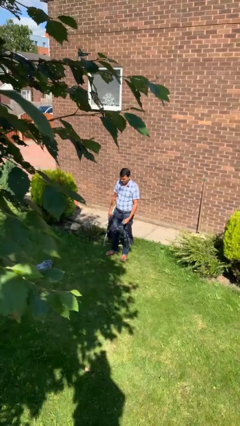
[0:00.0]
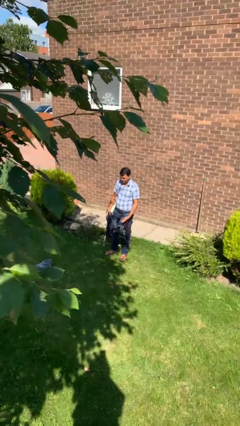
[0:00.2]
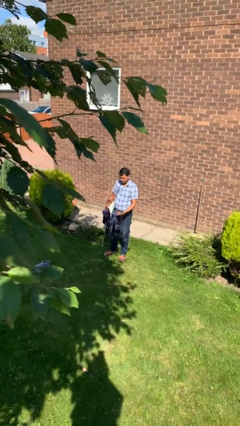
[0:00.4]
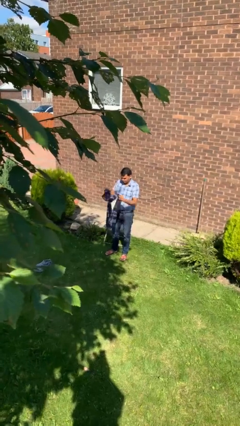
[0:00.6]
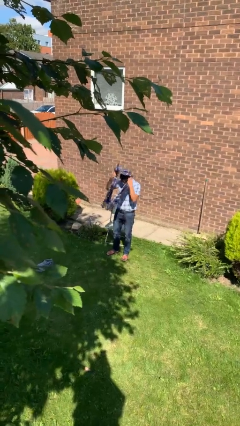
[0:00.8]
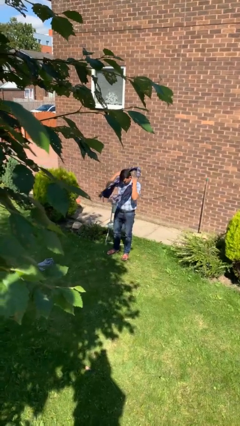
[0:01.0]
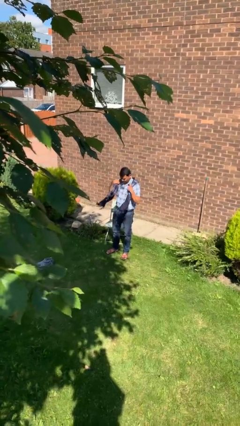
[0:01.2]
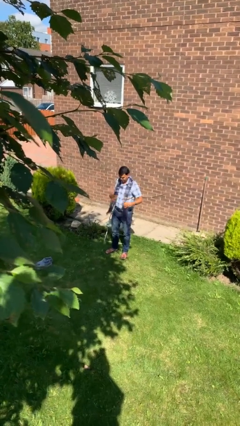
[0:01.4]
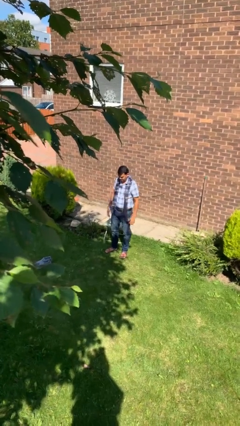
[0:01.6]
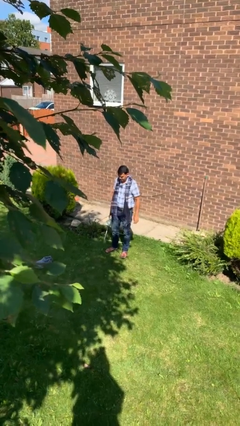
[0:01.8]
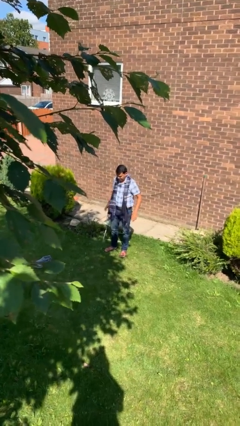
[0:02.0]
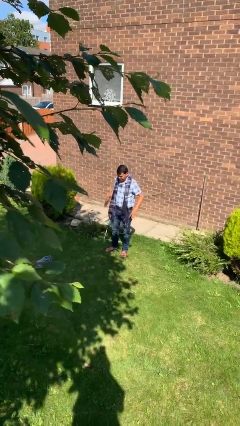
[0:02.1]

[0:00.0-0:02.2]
person puts on scarf

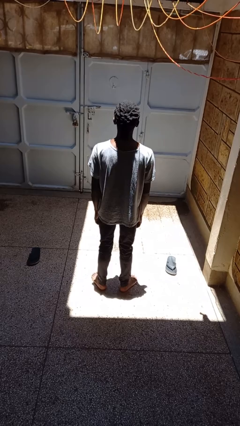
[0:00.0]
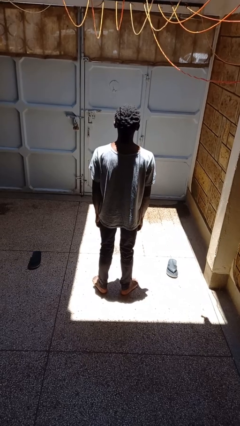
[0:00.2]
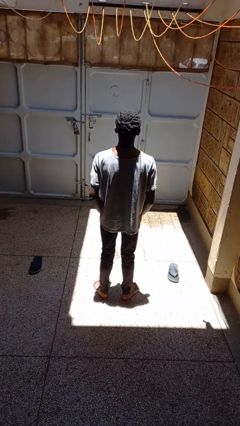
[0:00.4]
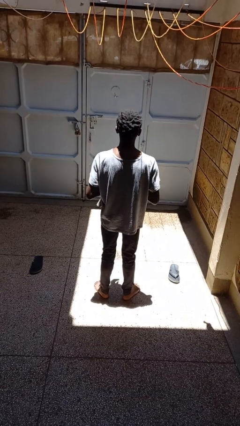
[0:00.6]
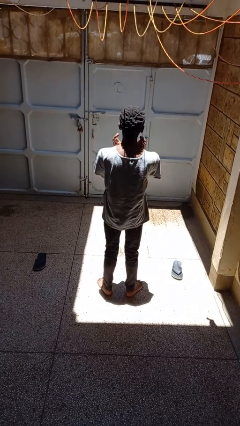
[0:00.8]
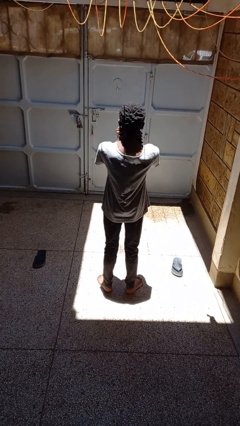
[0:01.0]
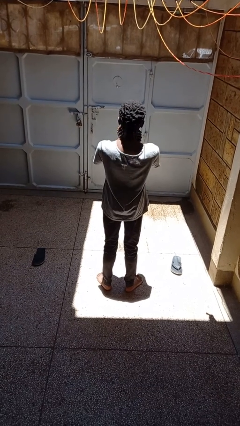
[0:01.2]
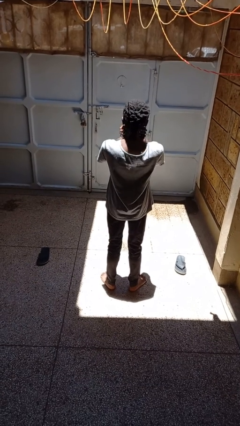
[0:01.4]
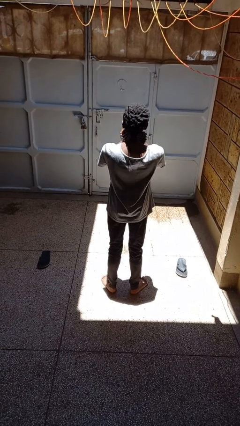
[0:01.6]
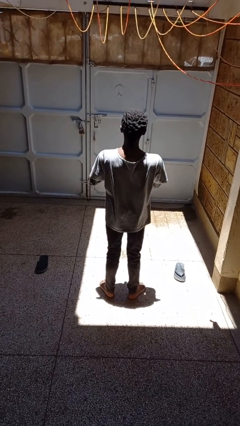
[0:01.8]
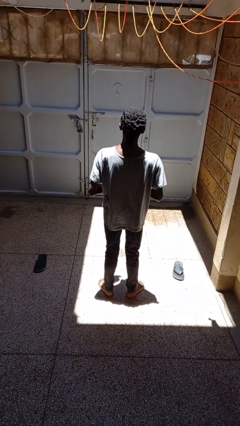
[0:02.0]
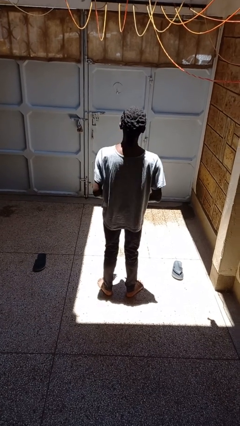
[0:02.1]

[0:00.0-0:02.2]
person rubs neck

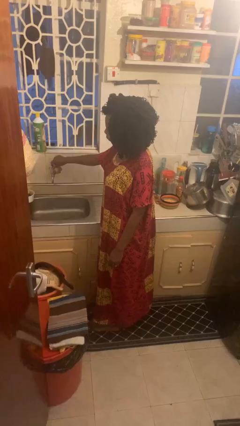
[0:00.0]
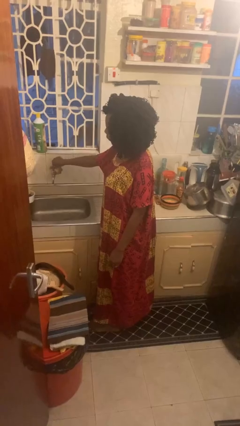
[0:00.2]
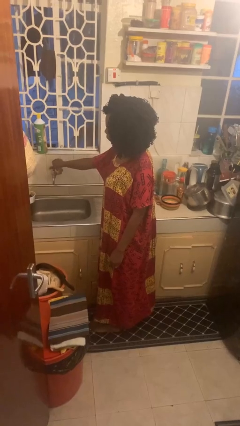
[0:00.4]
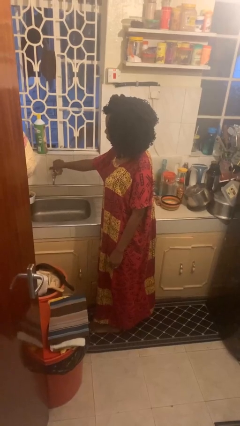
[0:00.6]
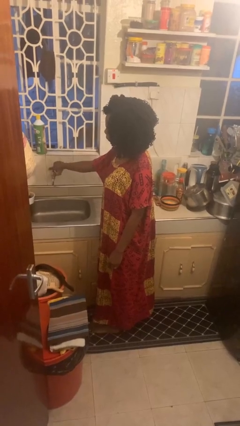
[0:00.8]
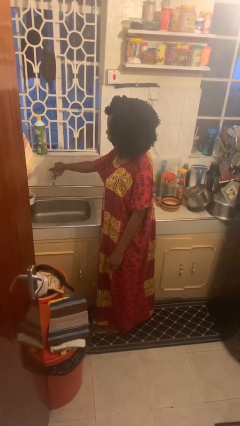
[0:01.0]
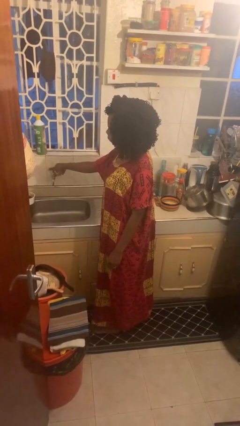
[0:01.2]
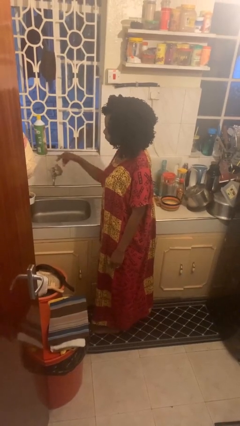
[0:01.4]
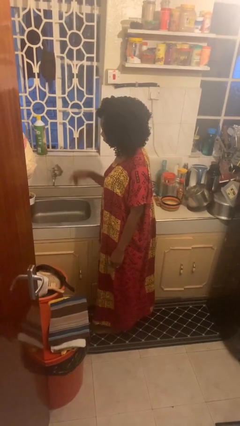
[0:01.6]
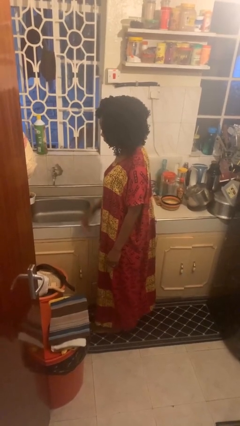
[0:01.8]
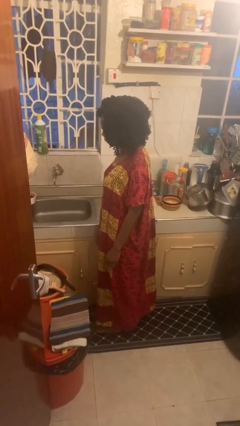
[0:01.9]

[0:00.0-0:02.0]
person turns off faucet

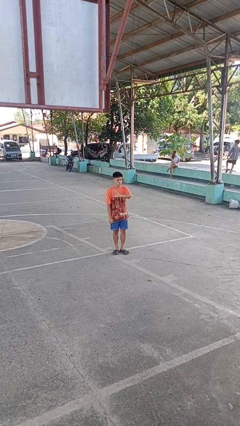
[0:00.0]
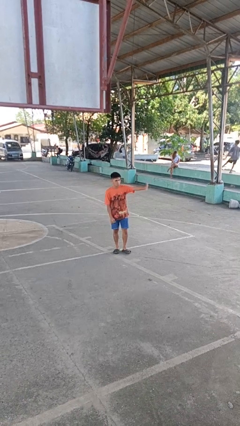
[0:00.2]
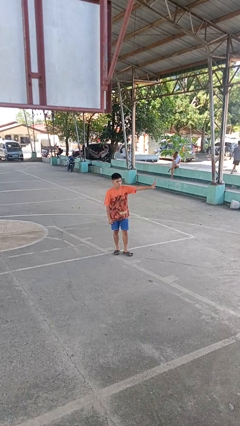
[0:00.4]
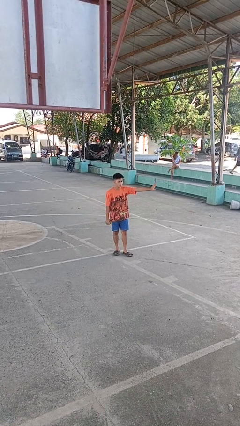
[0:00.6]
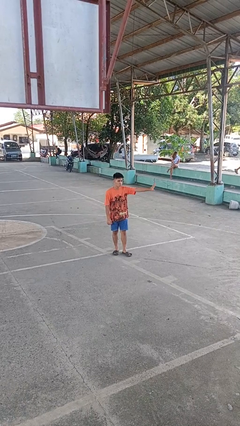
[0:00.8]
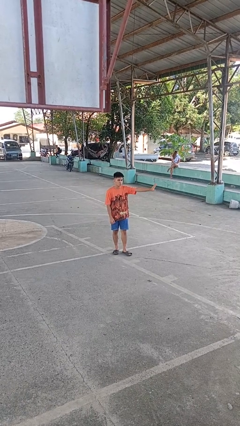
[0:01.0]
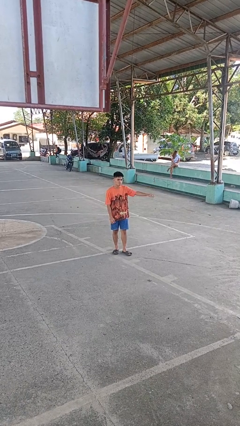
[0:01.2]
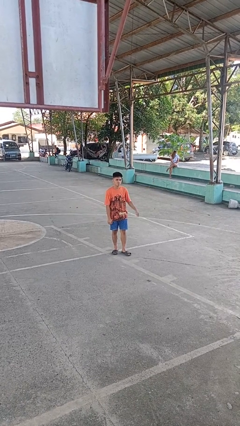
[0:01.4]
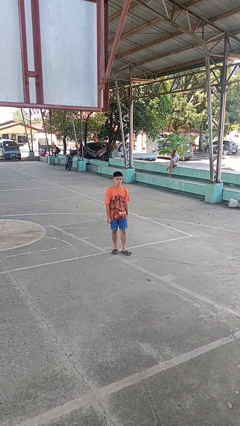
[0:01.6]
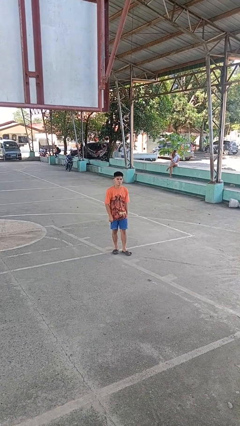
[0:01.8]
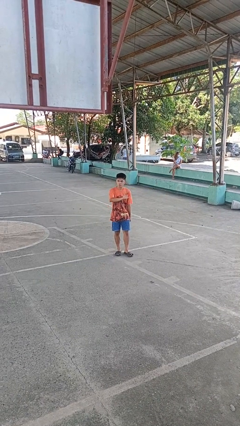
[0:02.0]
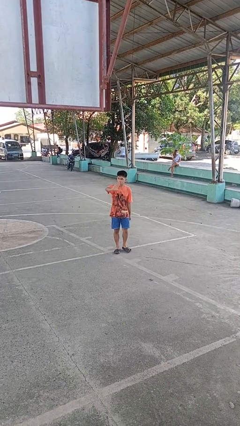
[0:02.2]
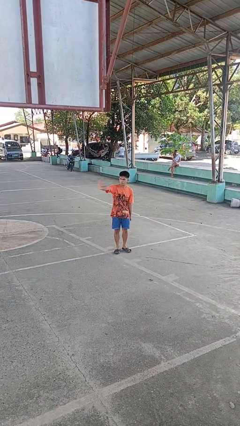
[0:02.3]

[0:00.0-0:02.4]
person gestures swipe left

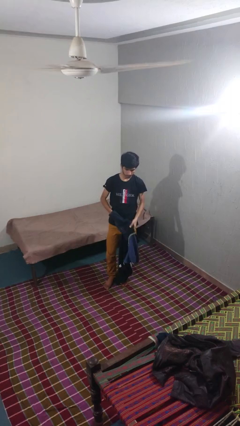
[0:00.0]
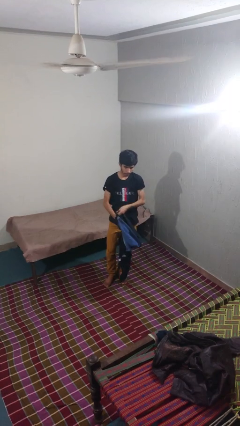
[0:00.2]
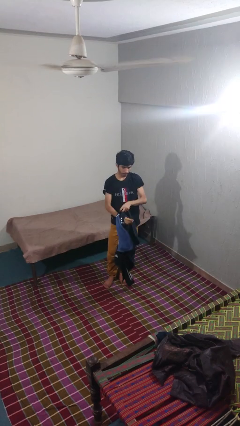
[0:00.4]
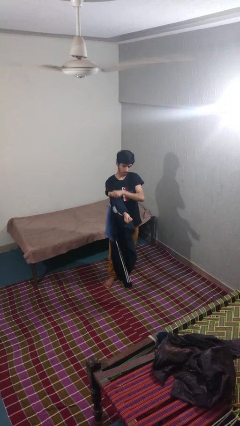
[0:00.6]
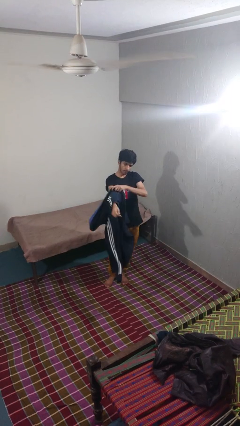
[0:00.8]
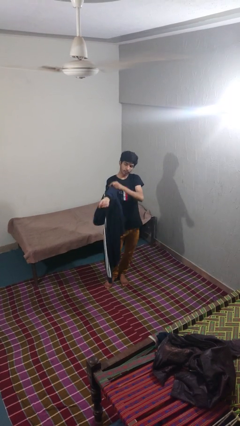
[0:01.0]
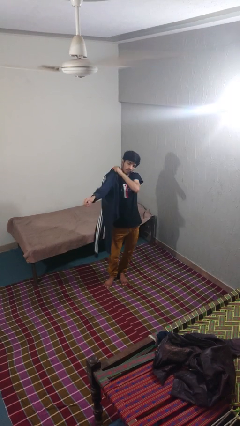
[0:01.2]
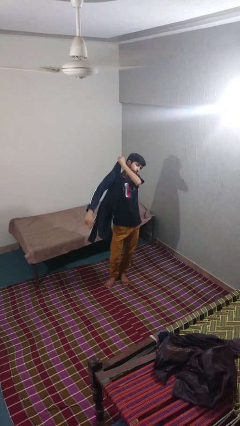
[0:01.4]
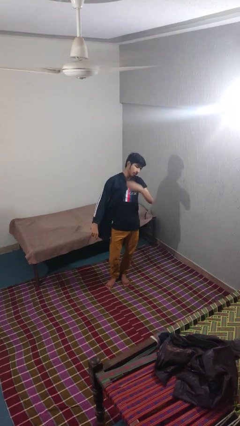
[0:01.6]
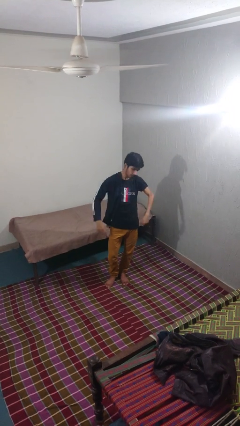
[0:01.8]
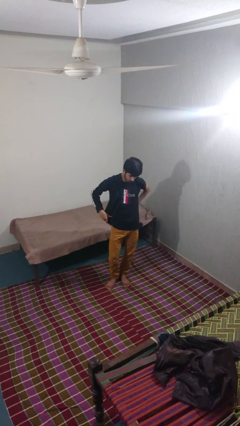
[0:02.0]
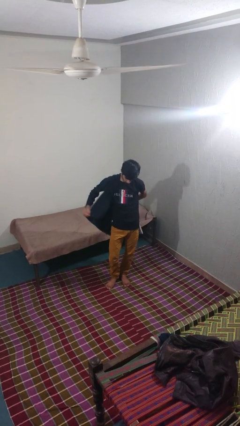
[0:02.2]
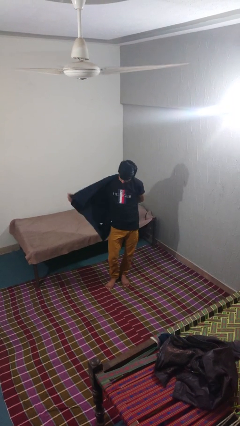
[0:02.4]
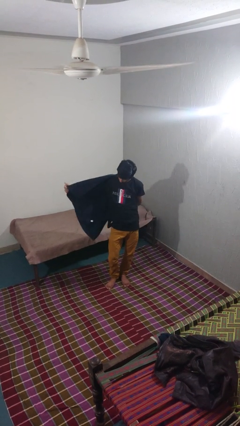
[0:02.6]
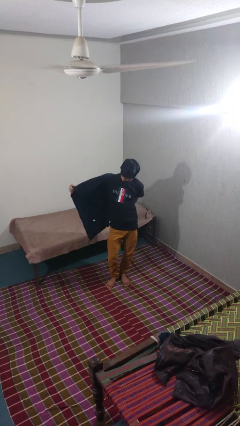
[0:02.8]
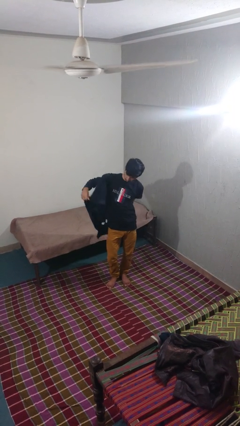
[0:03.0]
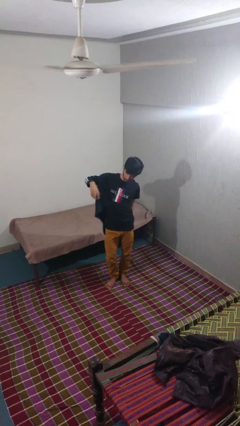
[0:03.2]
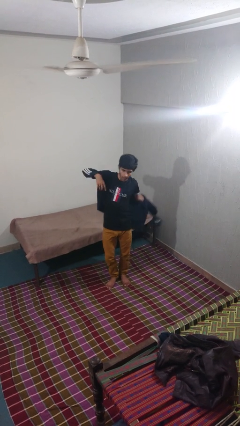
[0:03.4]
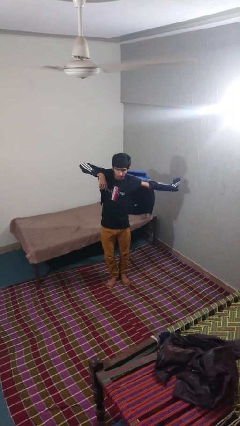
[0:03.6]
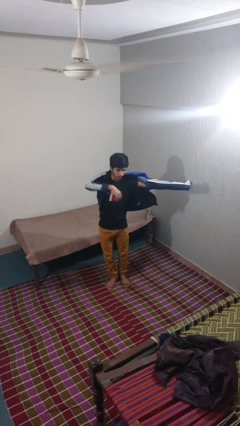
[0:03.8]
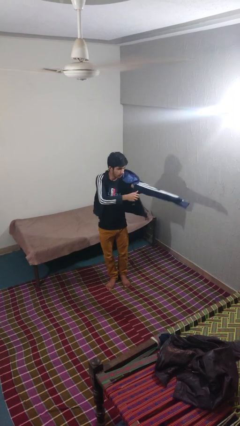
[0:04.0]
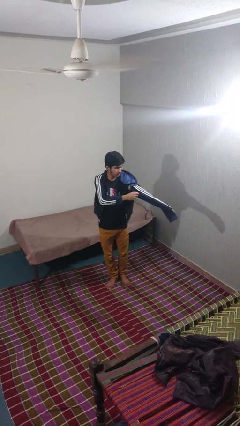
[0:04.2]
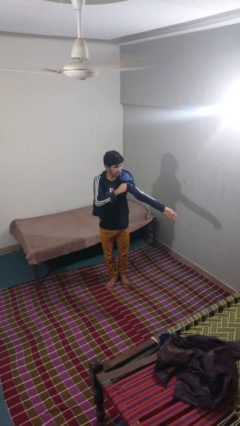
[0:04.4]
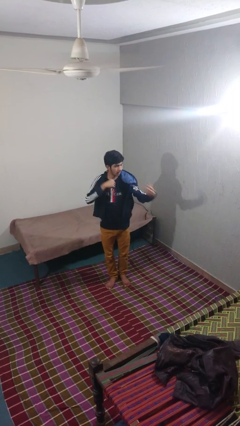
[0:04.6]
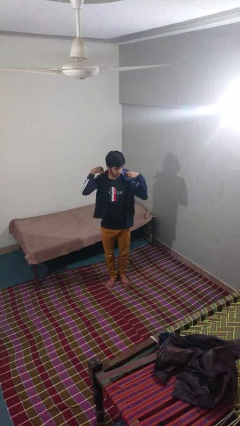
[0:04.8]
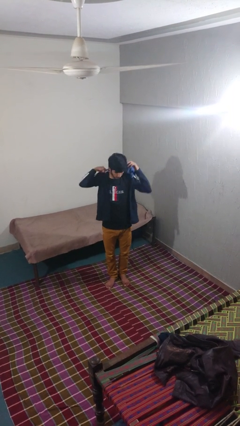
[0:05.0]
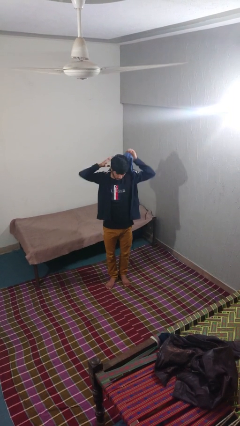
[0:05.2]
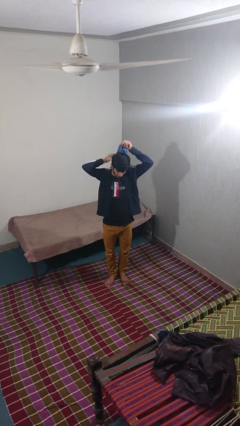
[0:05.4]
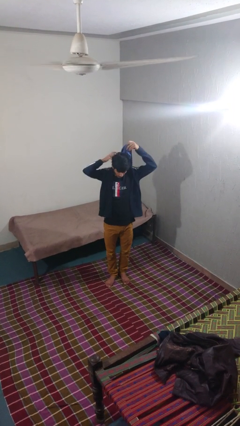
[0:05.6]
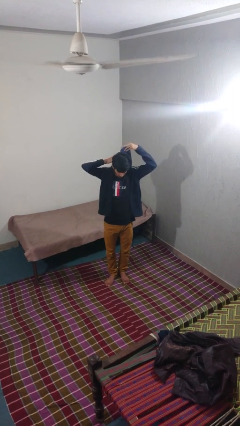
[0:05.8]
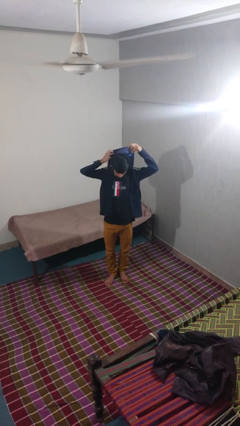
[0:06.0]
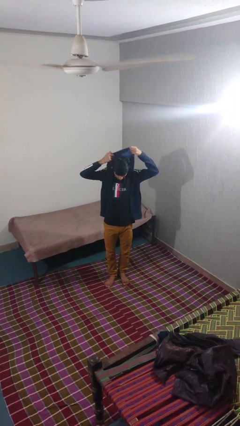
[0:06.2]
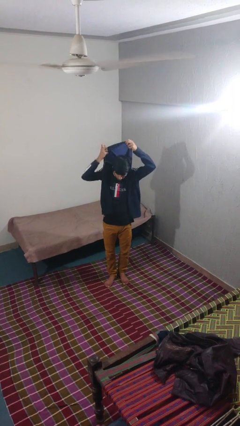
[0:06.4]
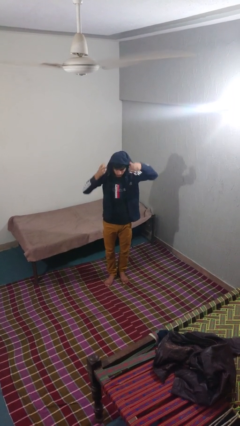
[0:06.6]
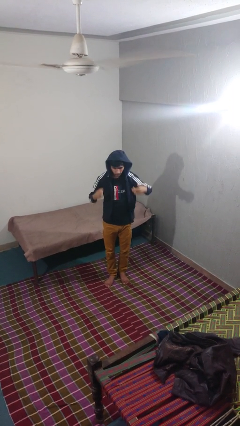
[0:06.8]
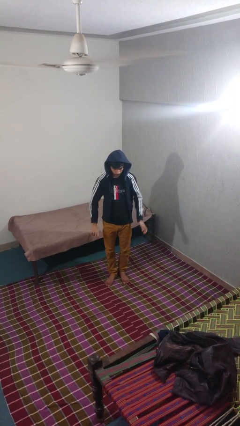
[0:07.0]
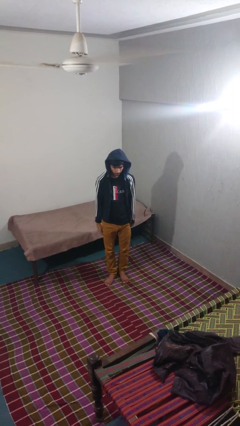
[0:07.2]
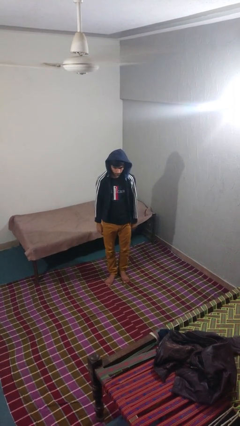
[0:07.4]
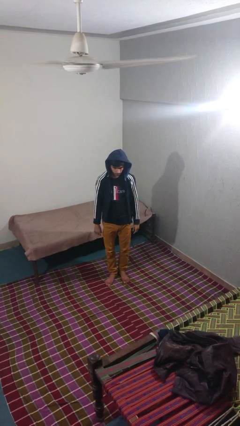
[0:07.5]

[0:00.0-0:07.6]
person puts on hoodie

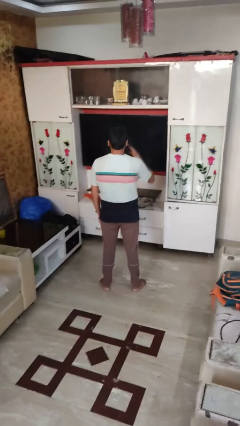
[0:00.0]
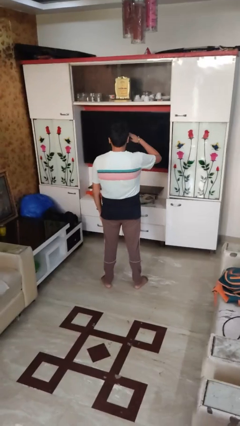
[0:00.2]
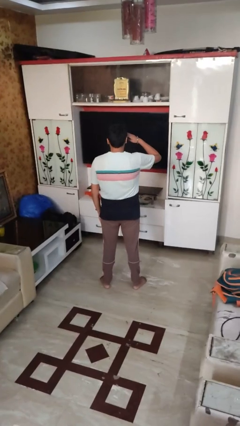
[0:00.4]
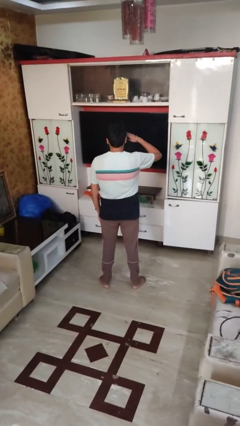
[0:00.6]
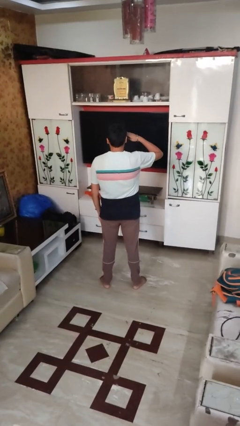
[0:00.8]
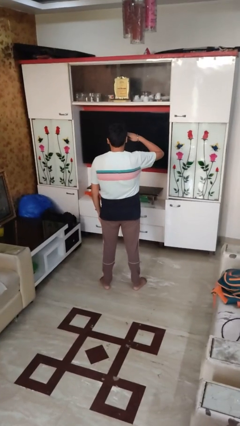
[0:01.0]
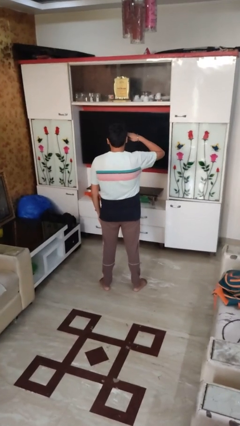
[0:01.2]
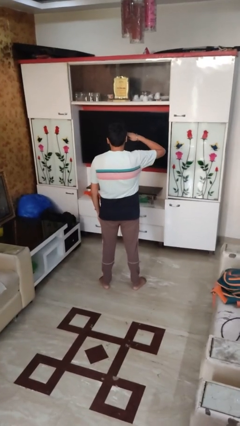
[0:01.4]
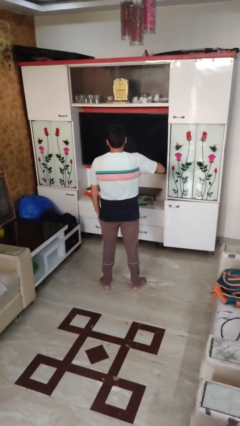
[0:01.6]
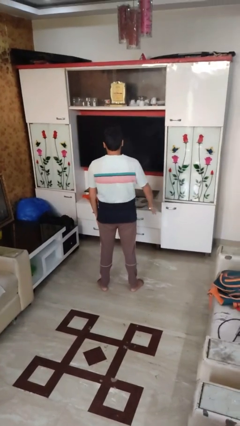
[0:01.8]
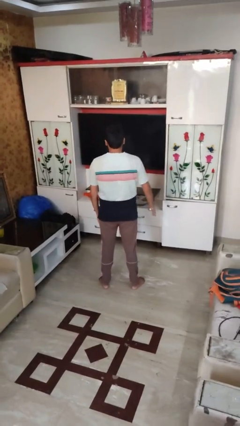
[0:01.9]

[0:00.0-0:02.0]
person salutes
